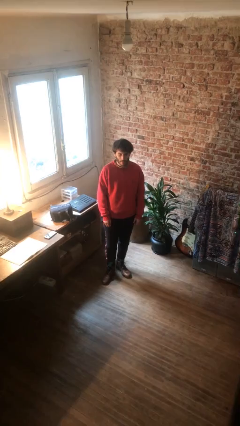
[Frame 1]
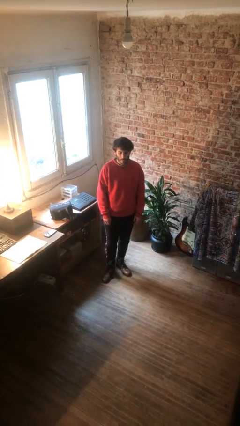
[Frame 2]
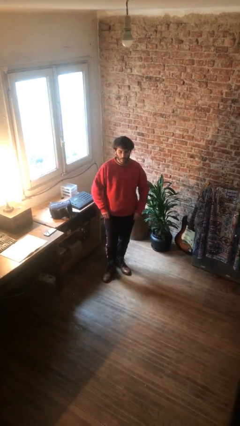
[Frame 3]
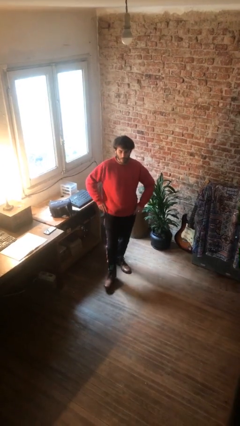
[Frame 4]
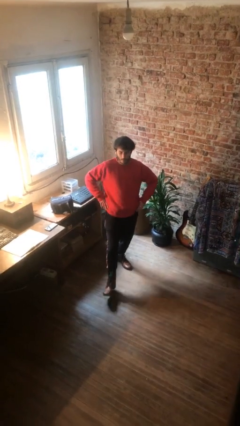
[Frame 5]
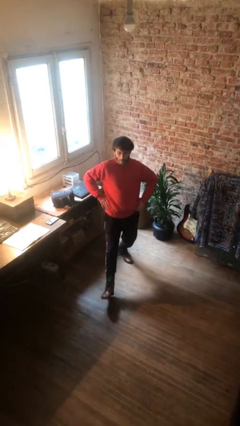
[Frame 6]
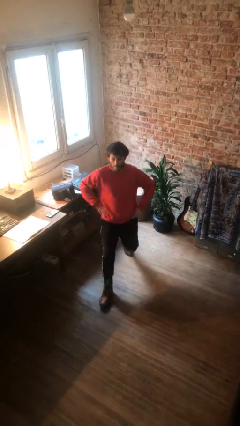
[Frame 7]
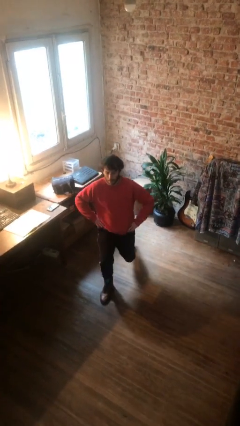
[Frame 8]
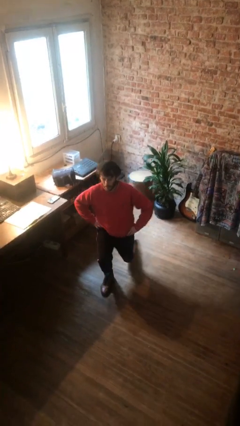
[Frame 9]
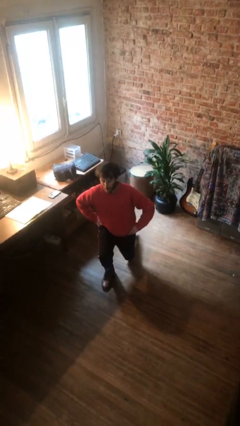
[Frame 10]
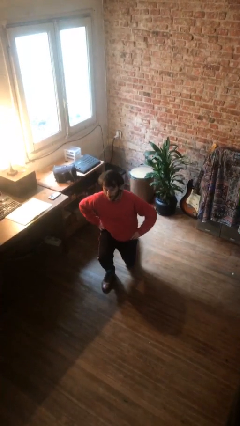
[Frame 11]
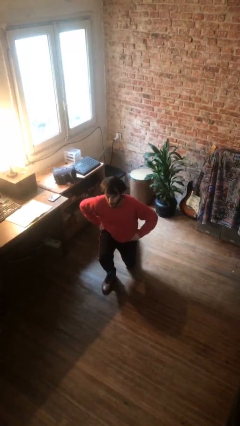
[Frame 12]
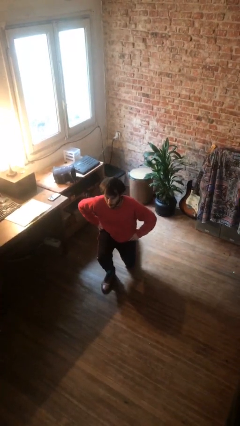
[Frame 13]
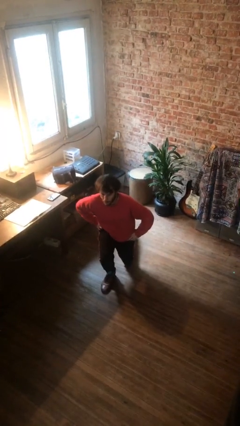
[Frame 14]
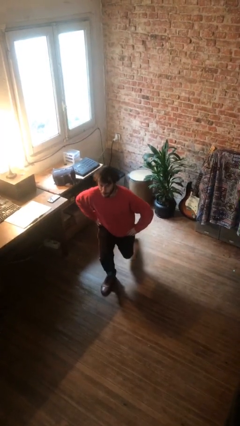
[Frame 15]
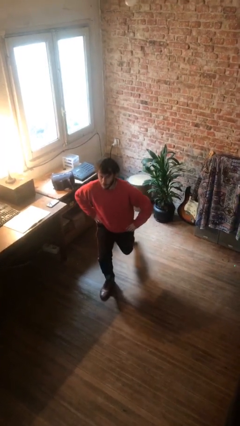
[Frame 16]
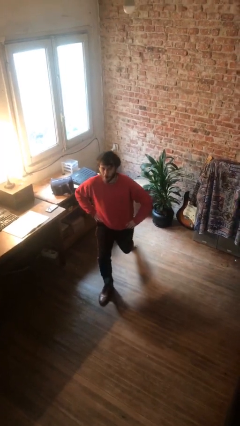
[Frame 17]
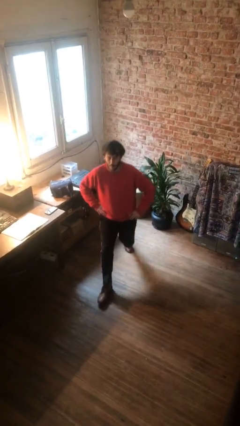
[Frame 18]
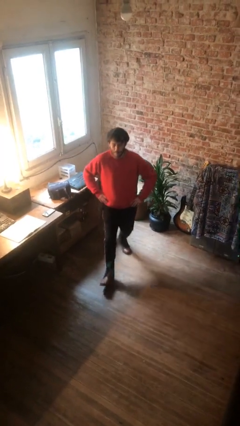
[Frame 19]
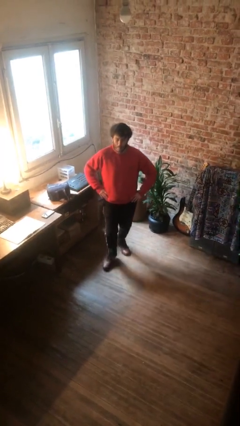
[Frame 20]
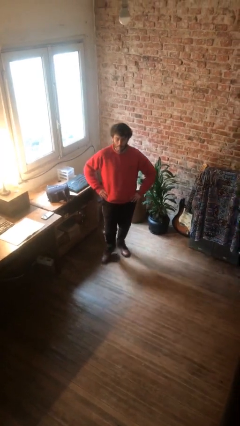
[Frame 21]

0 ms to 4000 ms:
person exercises with lunges

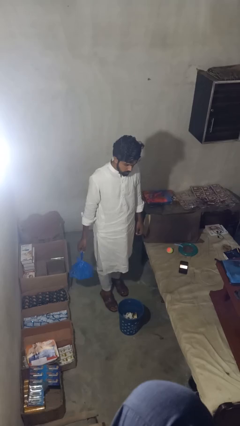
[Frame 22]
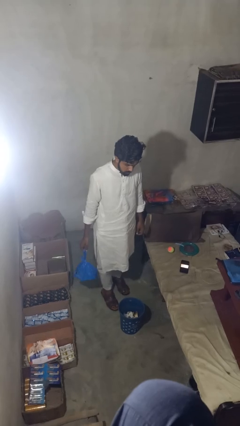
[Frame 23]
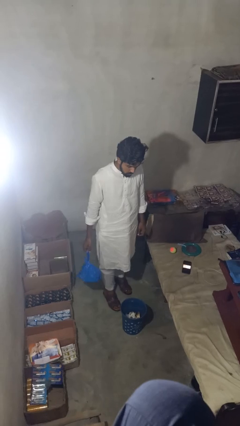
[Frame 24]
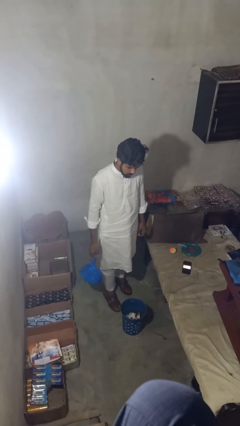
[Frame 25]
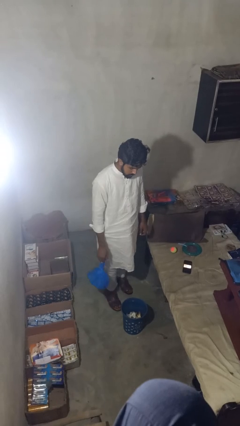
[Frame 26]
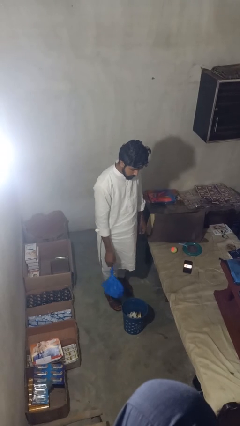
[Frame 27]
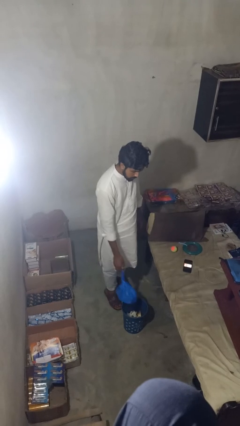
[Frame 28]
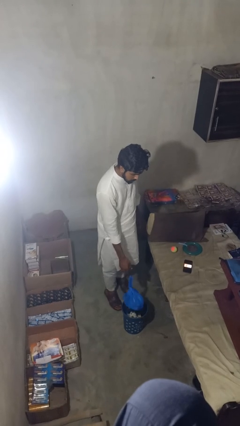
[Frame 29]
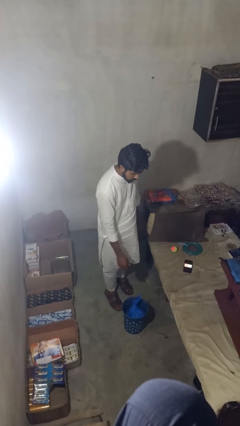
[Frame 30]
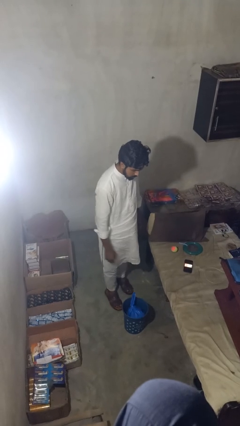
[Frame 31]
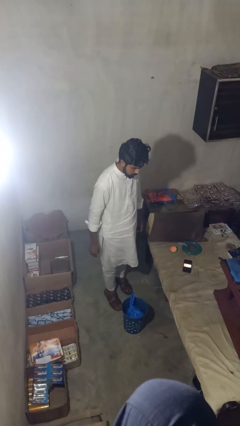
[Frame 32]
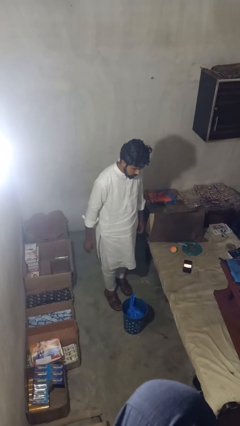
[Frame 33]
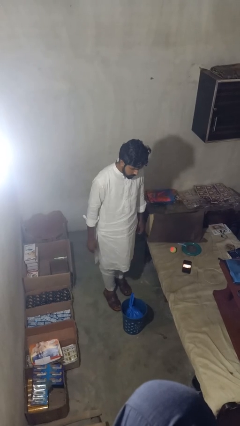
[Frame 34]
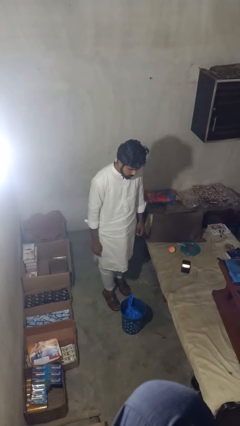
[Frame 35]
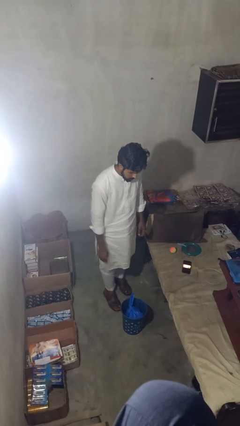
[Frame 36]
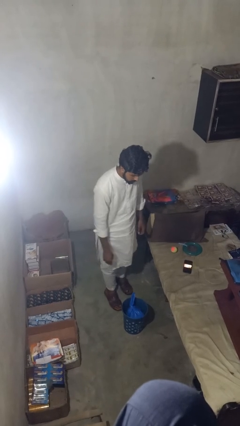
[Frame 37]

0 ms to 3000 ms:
person puts object into basket

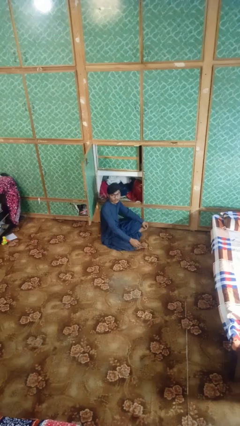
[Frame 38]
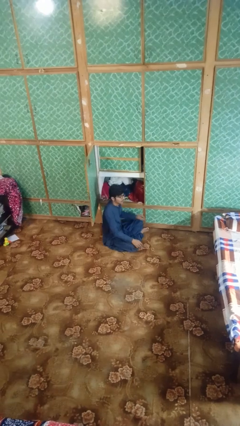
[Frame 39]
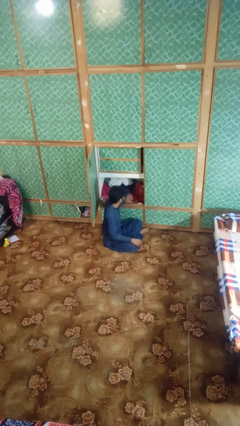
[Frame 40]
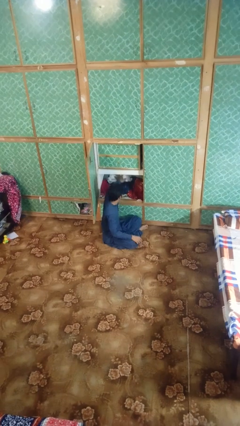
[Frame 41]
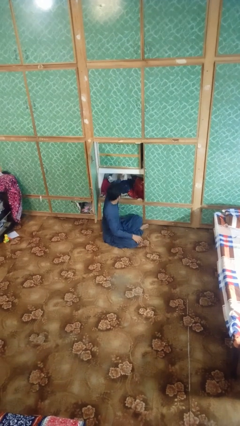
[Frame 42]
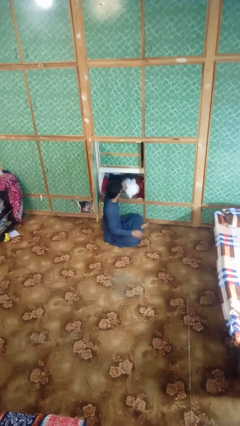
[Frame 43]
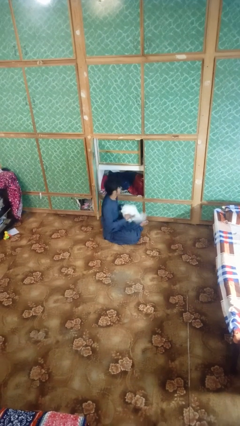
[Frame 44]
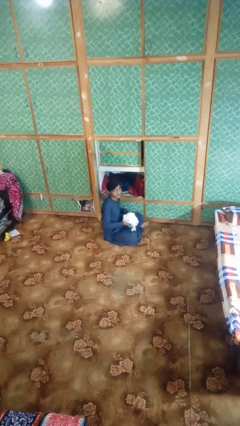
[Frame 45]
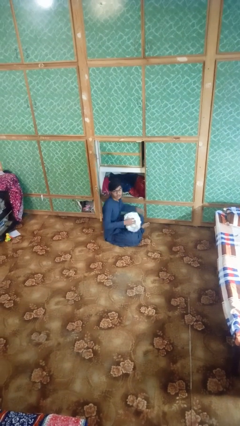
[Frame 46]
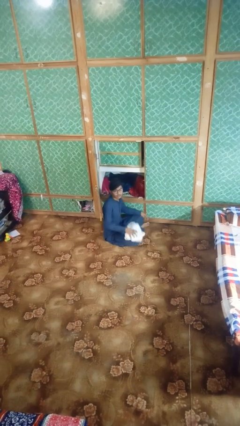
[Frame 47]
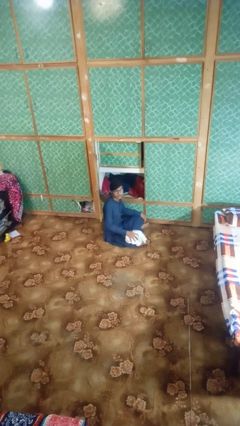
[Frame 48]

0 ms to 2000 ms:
person takes clothes from dresser

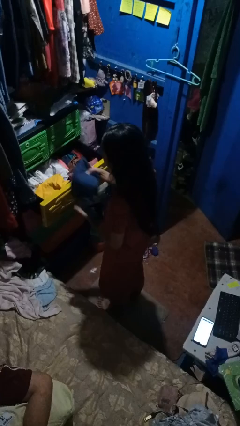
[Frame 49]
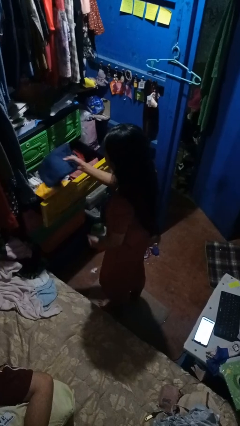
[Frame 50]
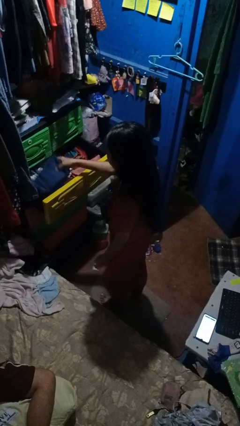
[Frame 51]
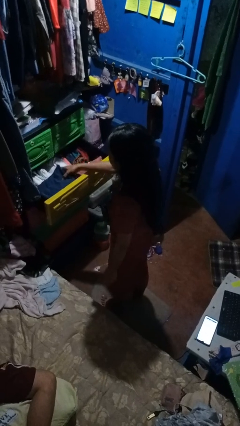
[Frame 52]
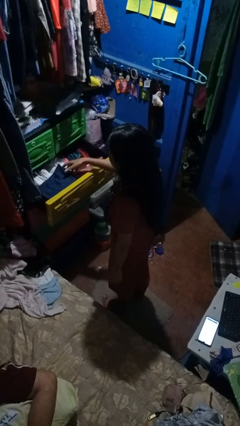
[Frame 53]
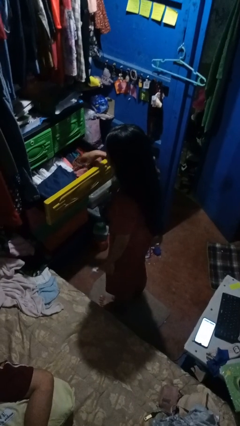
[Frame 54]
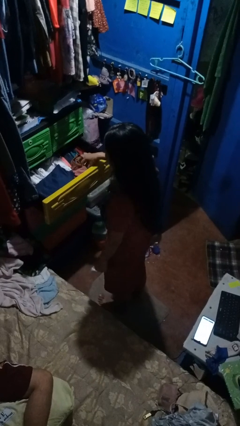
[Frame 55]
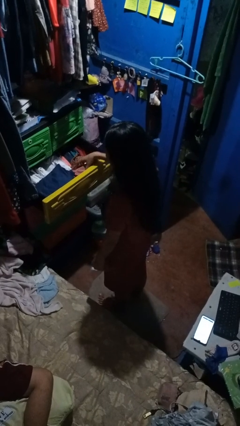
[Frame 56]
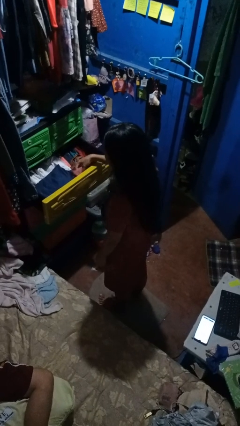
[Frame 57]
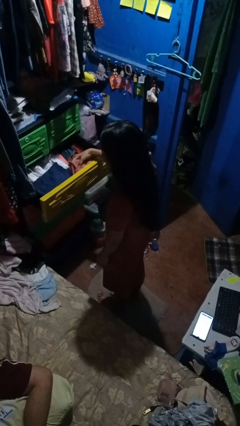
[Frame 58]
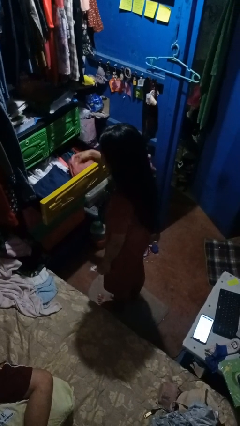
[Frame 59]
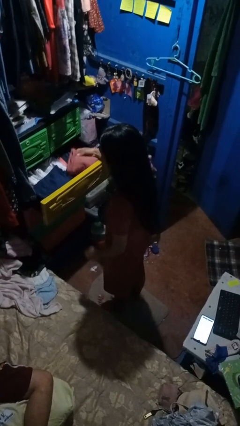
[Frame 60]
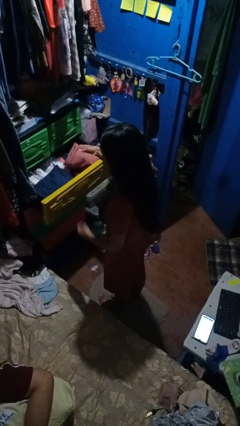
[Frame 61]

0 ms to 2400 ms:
person puts clothes into dresser

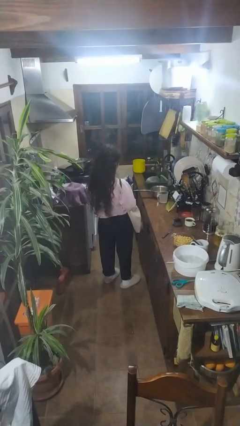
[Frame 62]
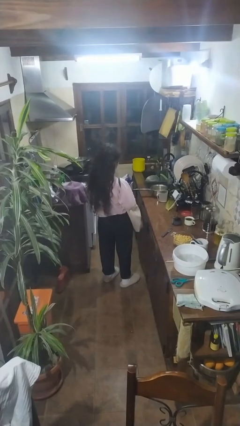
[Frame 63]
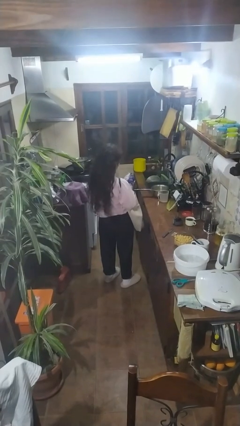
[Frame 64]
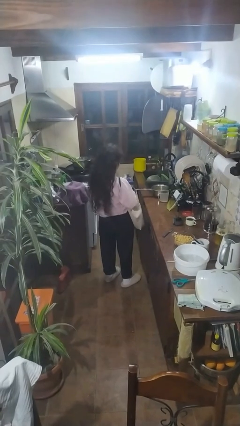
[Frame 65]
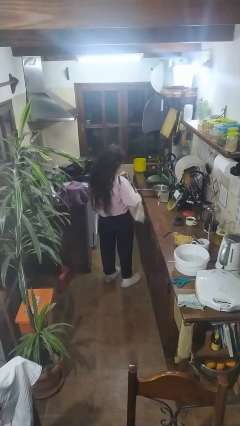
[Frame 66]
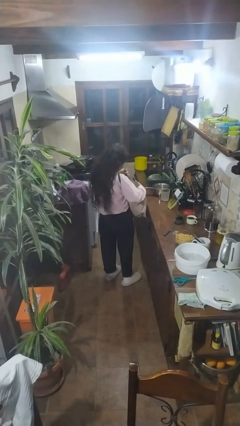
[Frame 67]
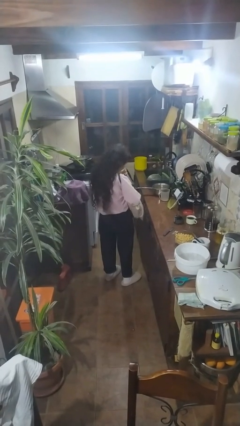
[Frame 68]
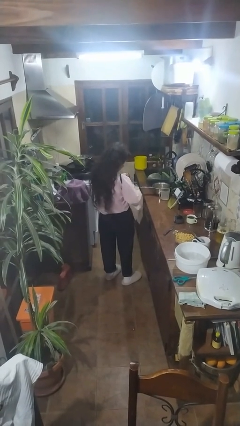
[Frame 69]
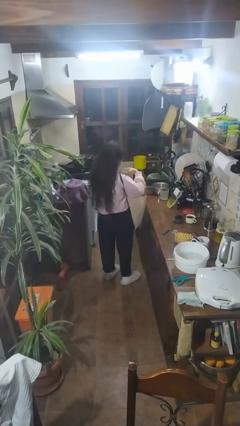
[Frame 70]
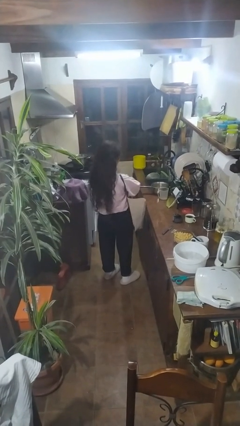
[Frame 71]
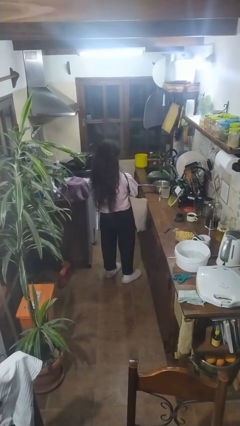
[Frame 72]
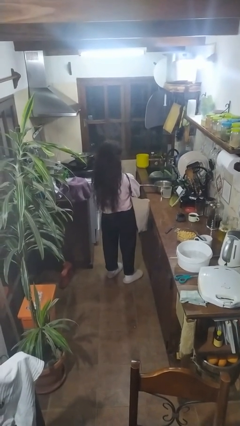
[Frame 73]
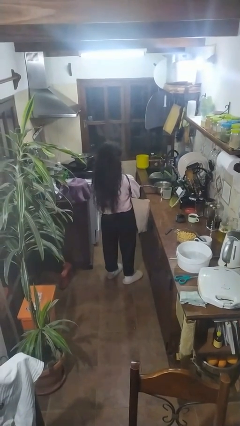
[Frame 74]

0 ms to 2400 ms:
person puts object into bag

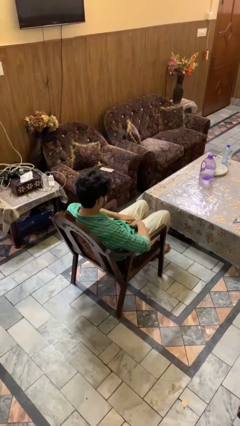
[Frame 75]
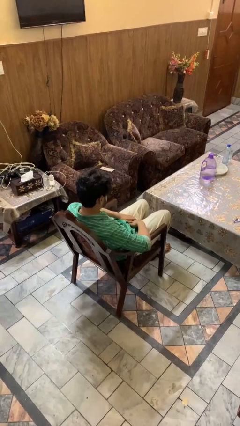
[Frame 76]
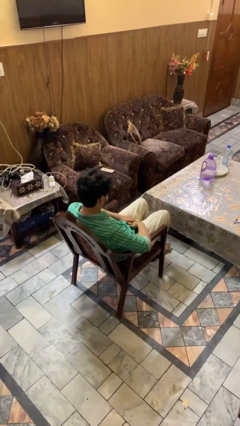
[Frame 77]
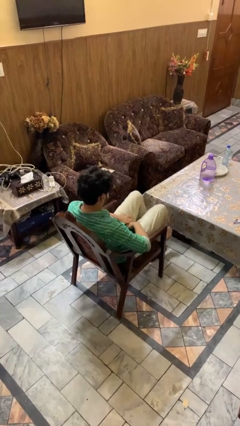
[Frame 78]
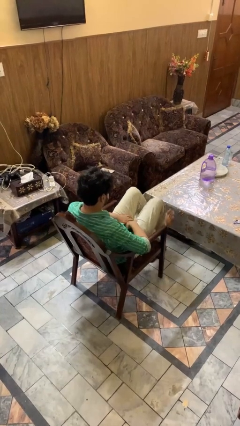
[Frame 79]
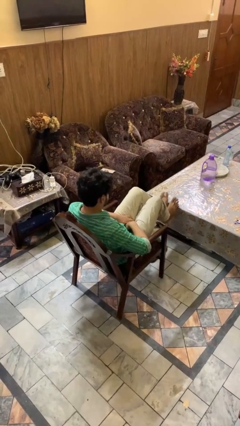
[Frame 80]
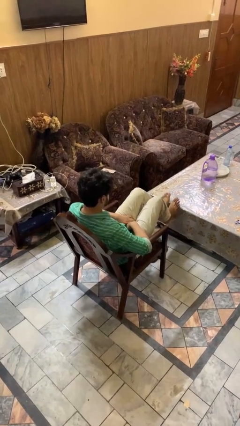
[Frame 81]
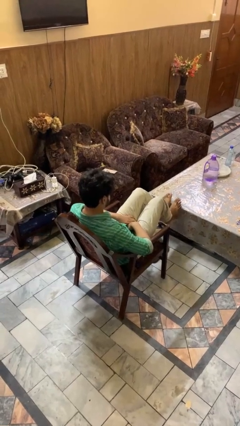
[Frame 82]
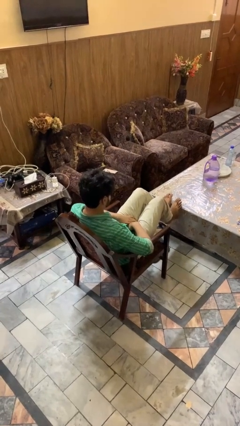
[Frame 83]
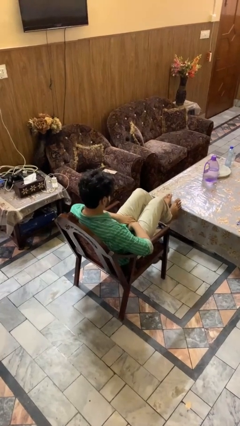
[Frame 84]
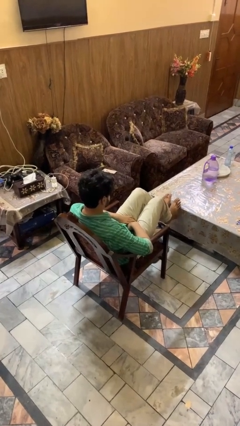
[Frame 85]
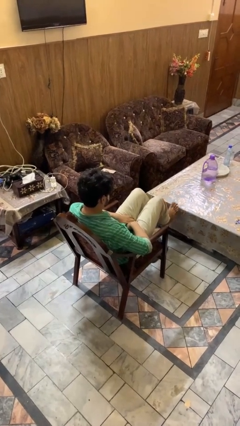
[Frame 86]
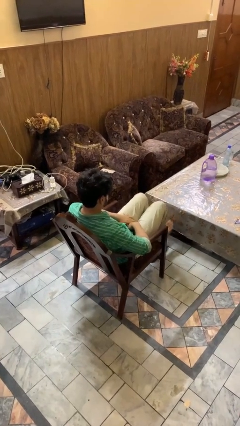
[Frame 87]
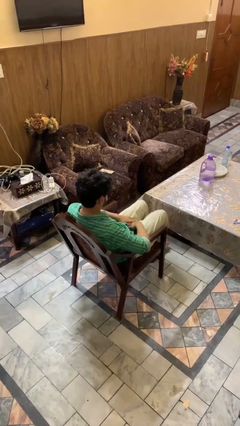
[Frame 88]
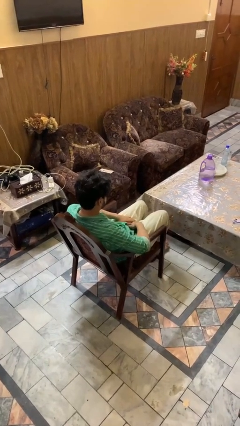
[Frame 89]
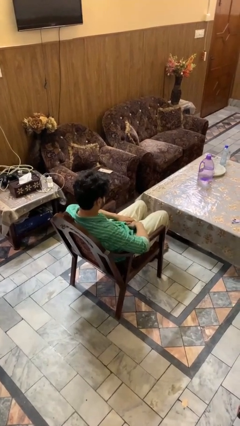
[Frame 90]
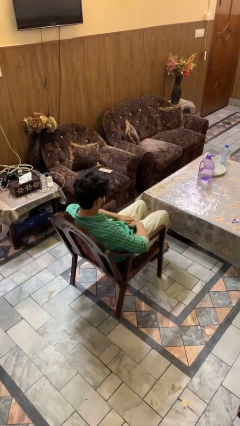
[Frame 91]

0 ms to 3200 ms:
person puts feet up
